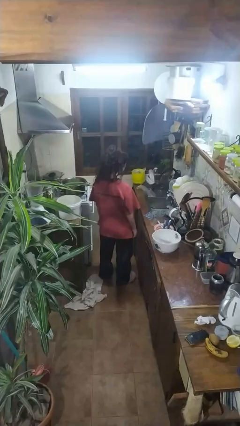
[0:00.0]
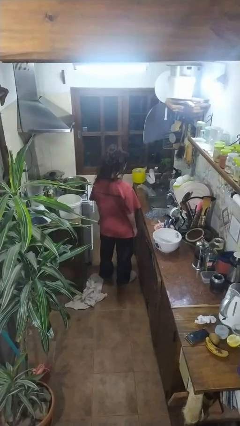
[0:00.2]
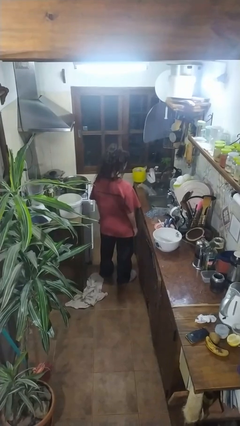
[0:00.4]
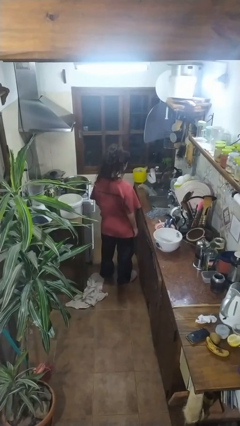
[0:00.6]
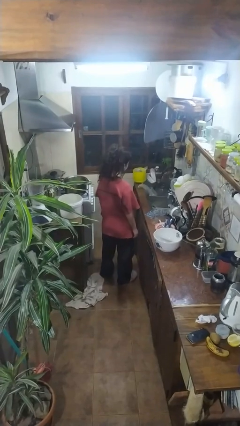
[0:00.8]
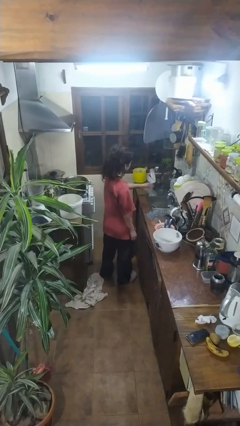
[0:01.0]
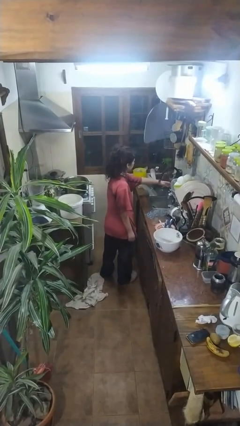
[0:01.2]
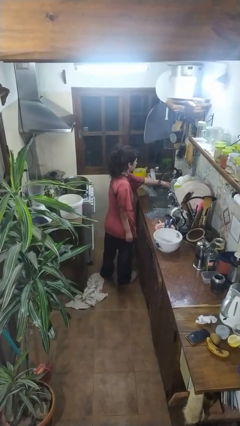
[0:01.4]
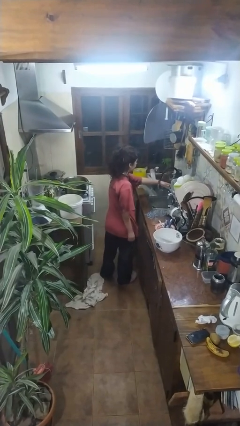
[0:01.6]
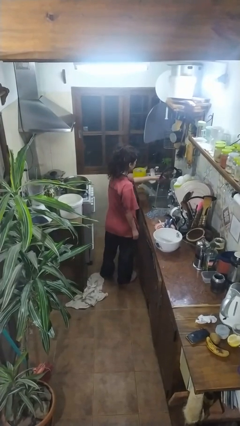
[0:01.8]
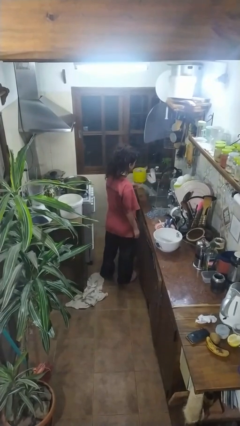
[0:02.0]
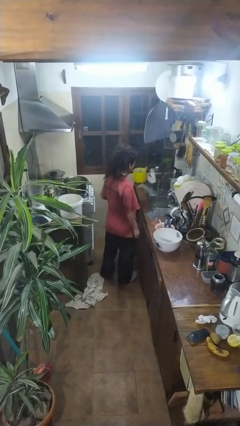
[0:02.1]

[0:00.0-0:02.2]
person turns on faucet

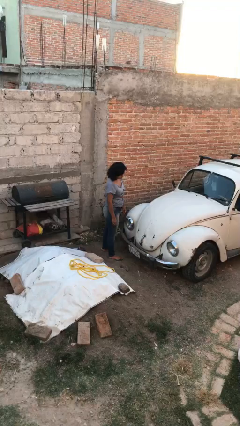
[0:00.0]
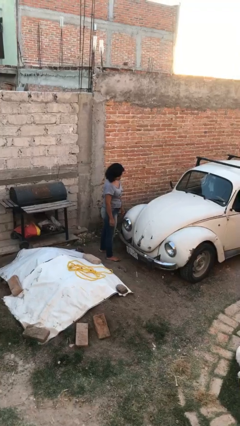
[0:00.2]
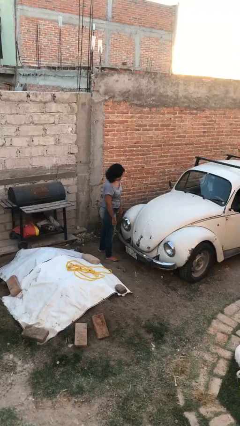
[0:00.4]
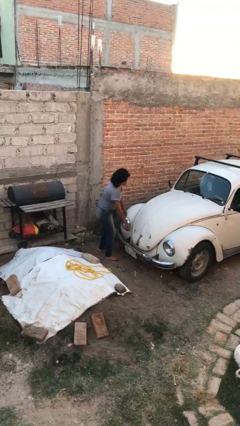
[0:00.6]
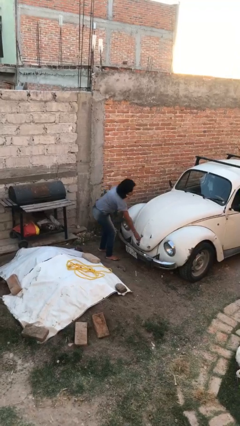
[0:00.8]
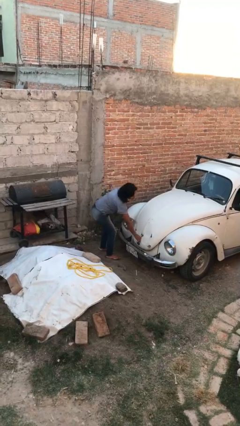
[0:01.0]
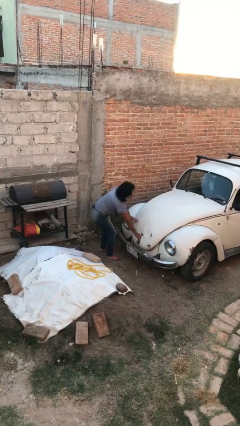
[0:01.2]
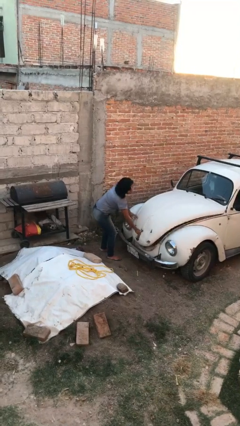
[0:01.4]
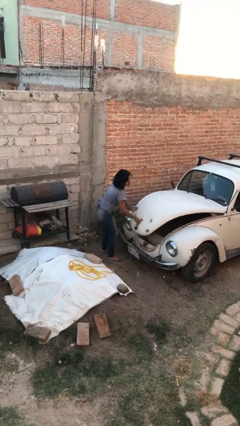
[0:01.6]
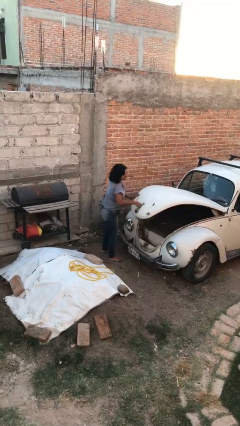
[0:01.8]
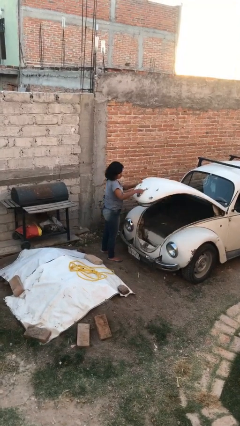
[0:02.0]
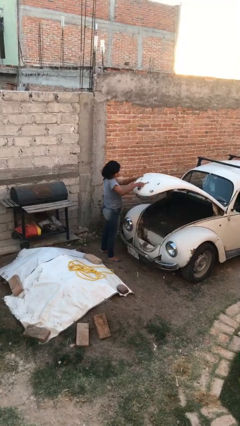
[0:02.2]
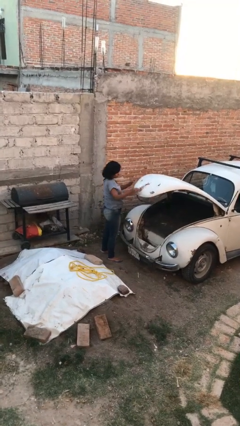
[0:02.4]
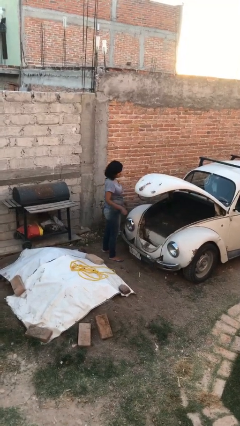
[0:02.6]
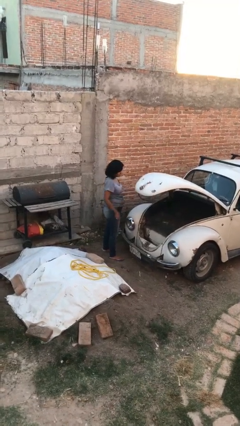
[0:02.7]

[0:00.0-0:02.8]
person opens car trunk

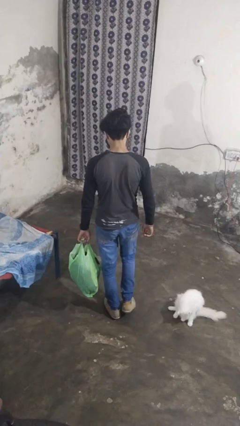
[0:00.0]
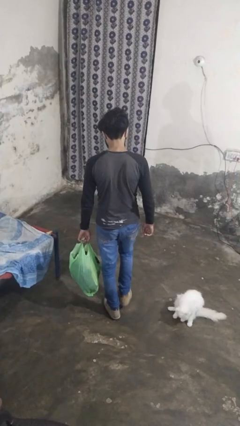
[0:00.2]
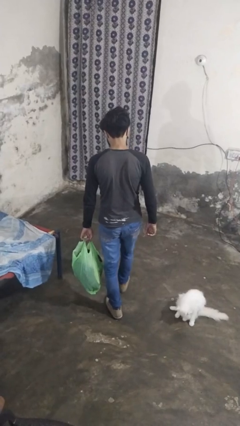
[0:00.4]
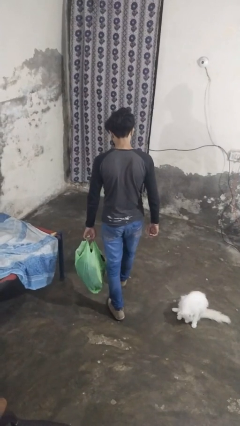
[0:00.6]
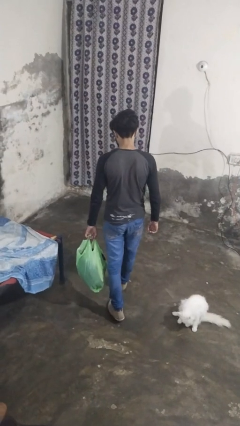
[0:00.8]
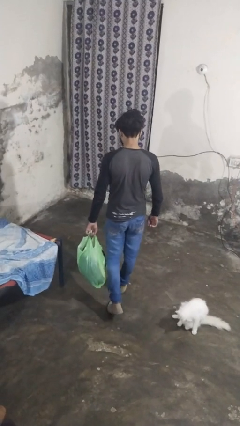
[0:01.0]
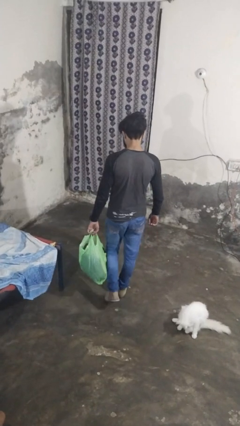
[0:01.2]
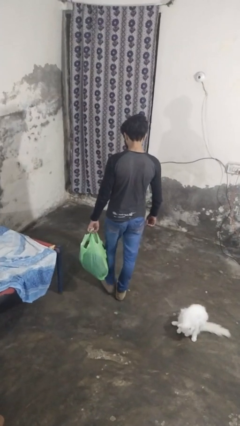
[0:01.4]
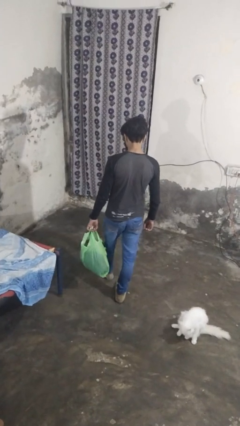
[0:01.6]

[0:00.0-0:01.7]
person carries groceries

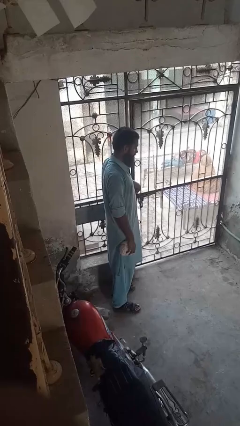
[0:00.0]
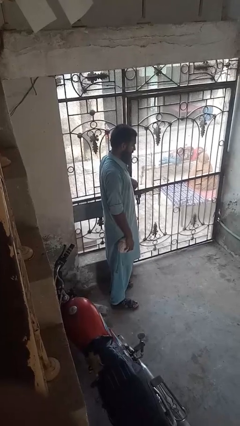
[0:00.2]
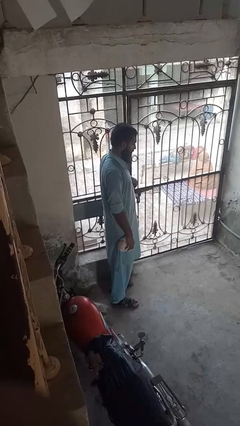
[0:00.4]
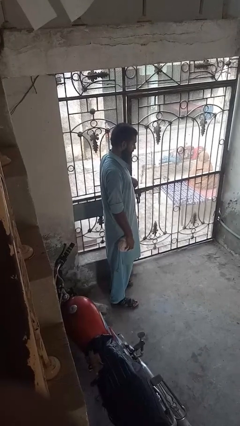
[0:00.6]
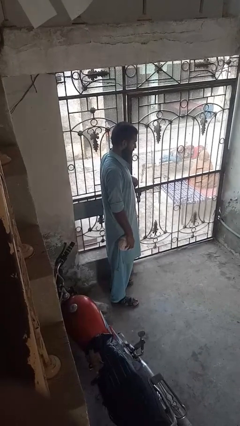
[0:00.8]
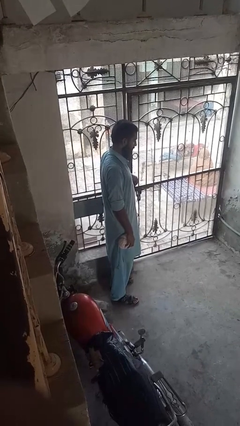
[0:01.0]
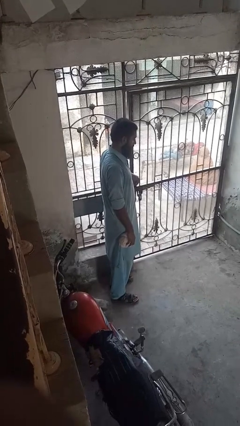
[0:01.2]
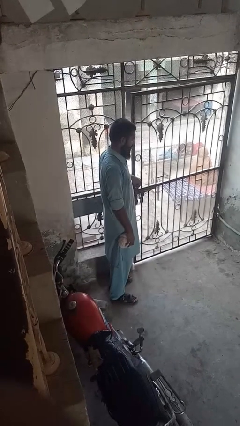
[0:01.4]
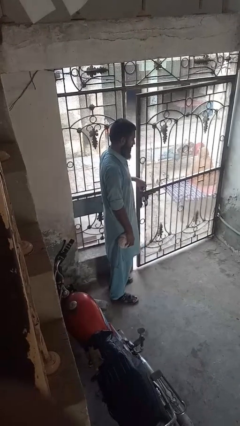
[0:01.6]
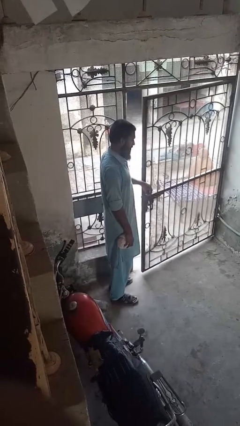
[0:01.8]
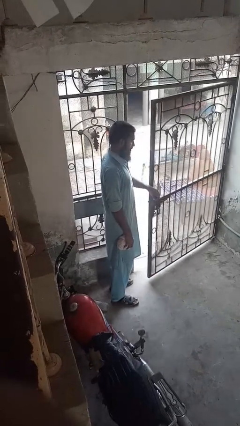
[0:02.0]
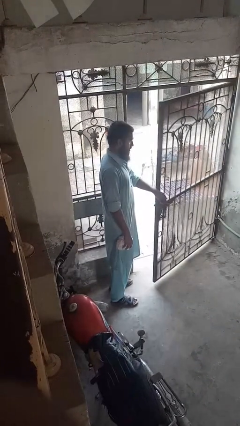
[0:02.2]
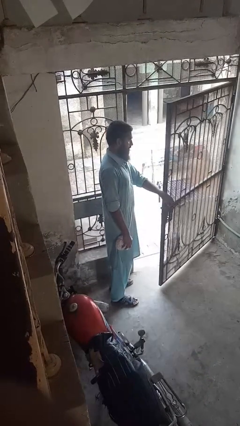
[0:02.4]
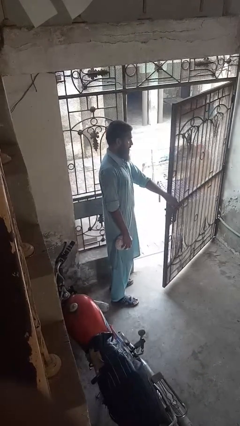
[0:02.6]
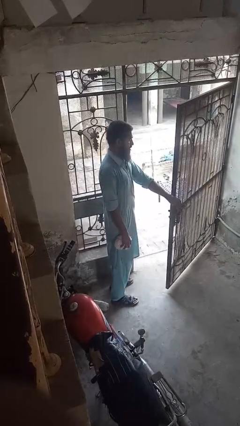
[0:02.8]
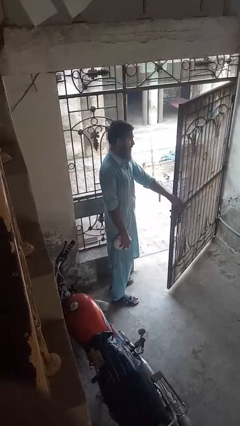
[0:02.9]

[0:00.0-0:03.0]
person opens gate

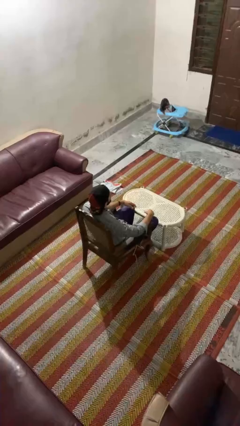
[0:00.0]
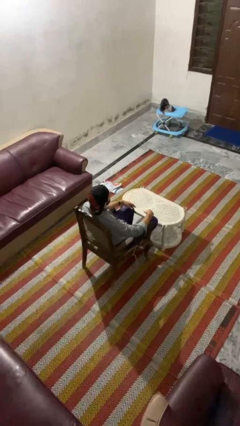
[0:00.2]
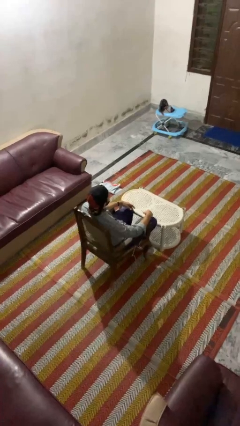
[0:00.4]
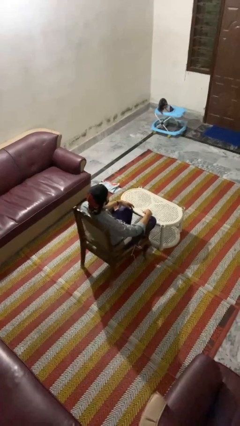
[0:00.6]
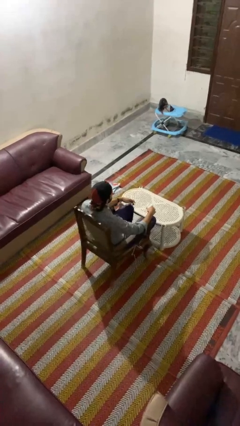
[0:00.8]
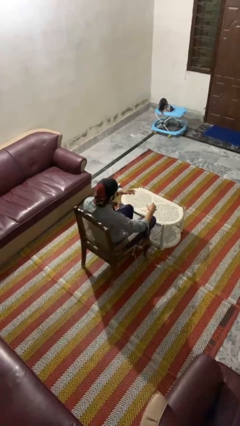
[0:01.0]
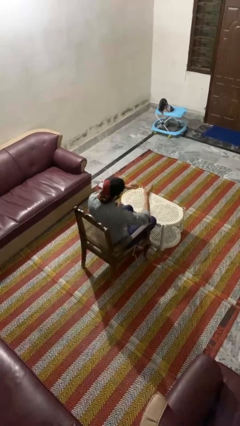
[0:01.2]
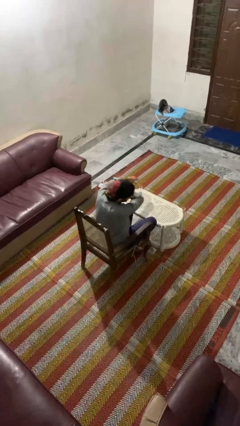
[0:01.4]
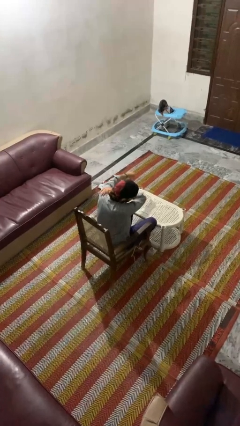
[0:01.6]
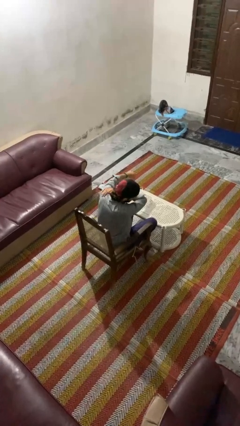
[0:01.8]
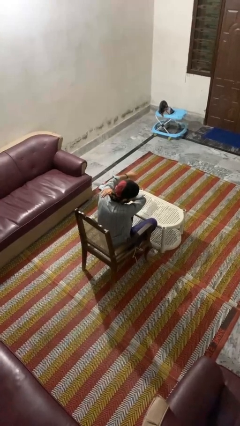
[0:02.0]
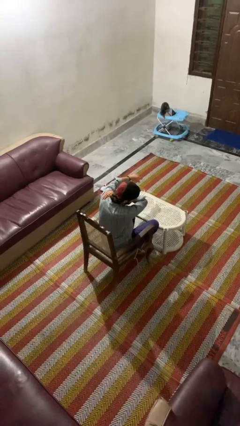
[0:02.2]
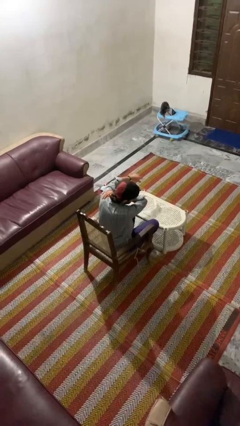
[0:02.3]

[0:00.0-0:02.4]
person swats bug

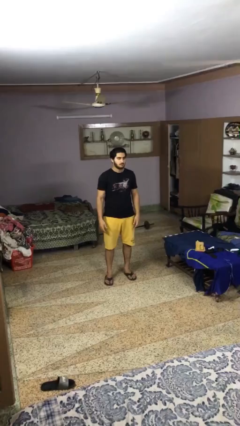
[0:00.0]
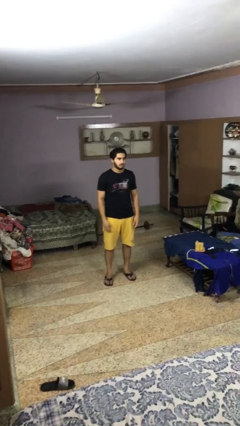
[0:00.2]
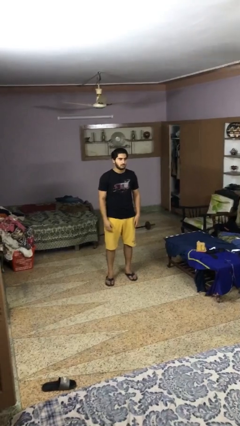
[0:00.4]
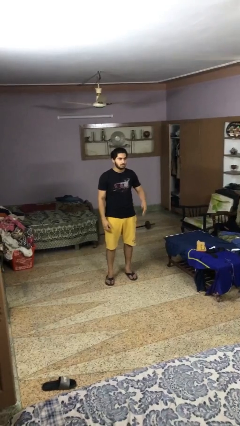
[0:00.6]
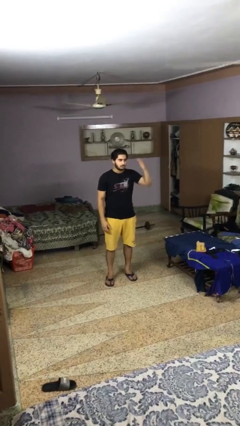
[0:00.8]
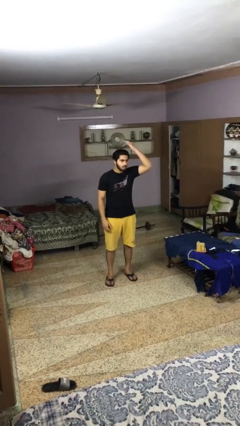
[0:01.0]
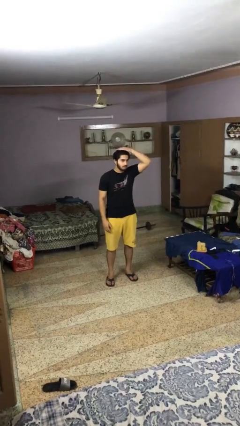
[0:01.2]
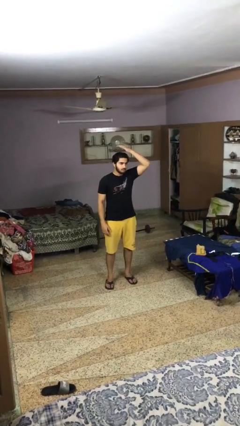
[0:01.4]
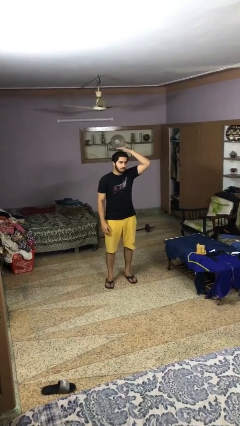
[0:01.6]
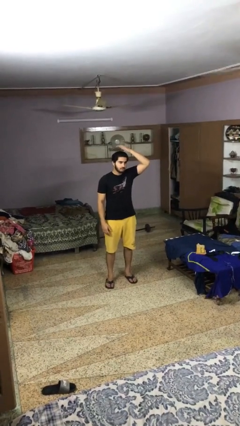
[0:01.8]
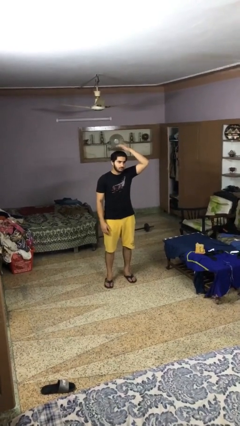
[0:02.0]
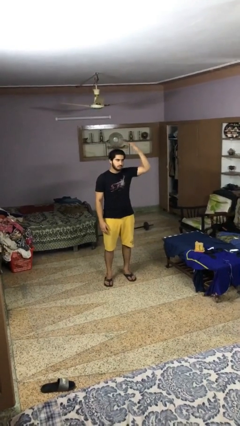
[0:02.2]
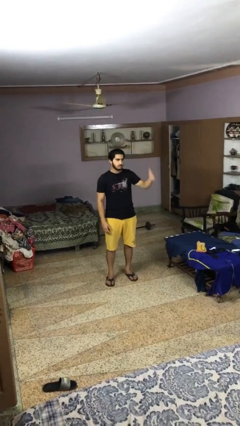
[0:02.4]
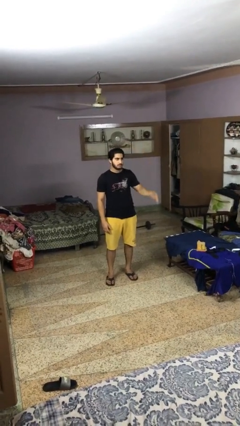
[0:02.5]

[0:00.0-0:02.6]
person pats head

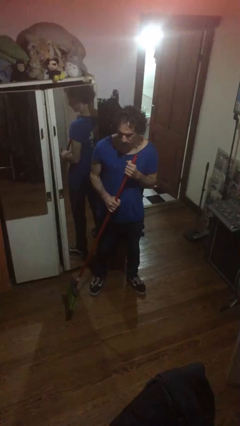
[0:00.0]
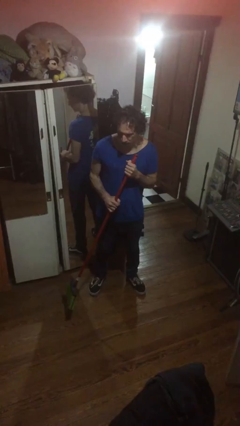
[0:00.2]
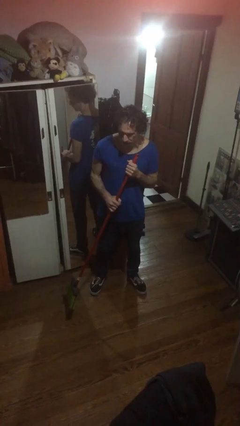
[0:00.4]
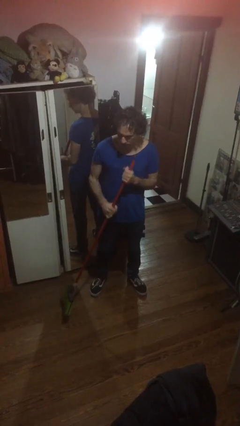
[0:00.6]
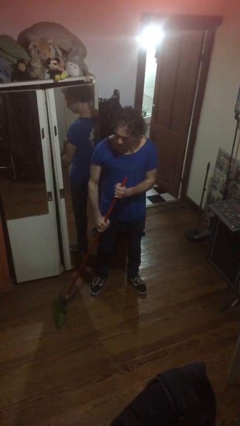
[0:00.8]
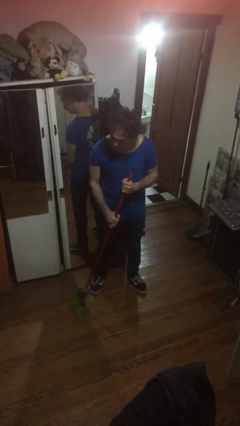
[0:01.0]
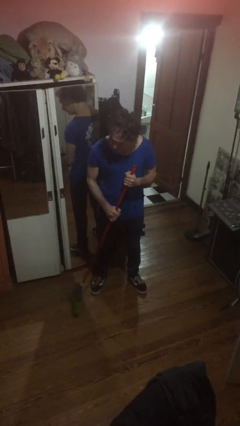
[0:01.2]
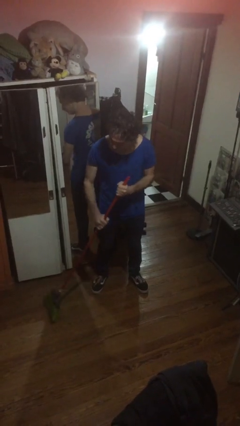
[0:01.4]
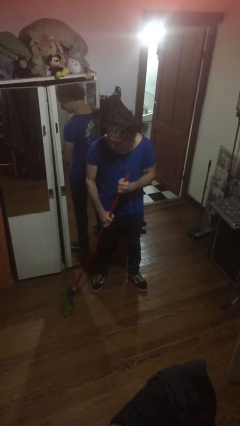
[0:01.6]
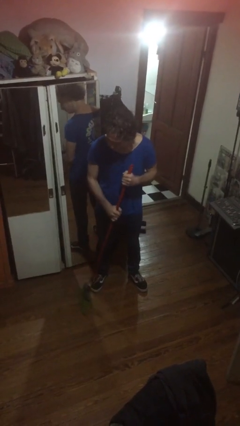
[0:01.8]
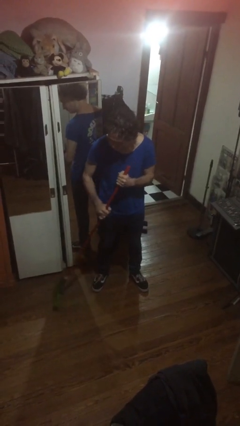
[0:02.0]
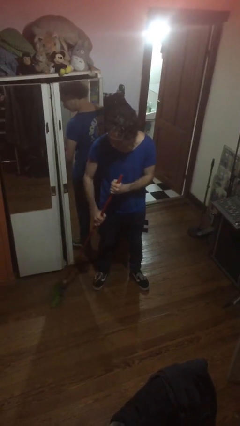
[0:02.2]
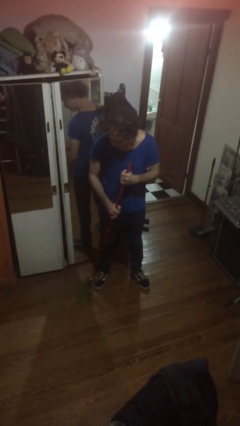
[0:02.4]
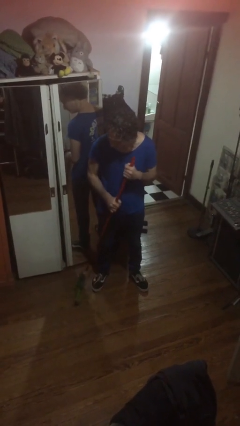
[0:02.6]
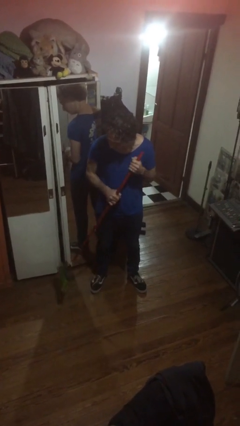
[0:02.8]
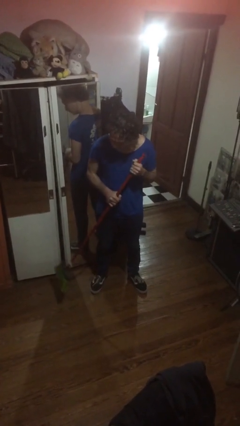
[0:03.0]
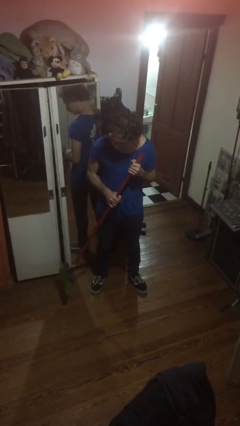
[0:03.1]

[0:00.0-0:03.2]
person sweeps floor
